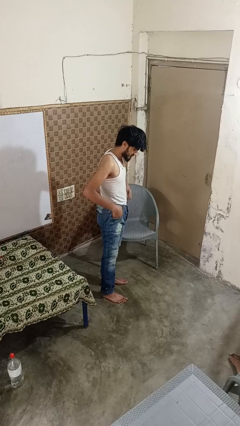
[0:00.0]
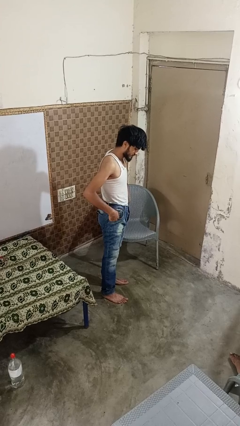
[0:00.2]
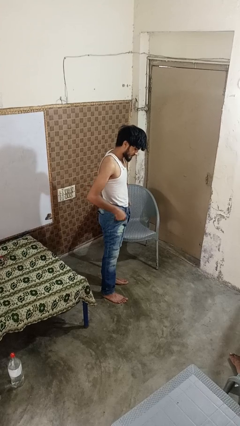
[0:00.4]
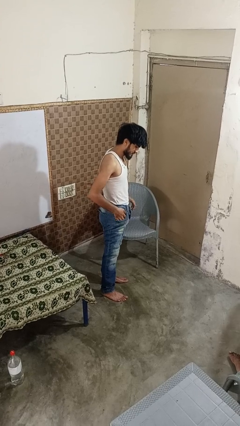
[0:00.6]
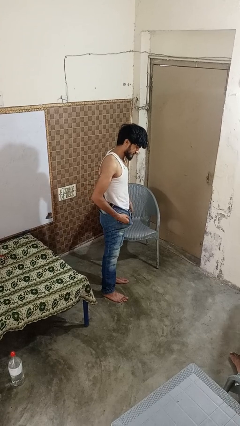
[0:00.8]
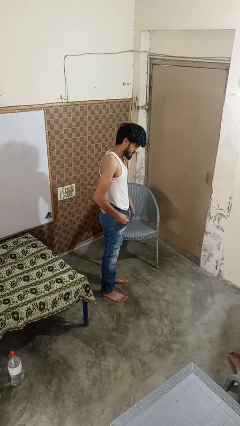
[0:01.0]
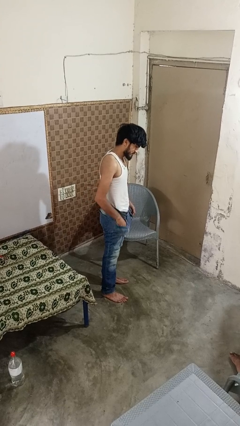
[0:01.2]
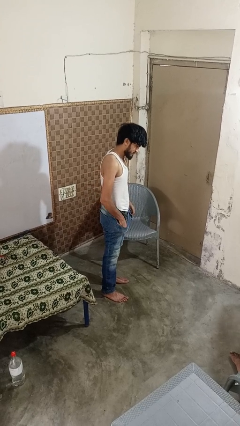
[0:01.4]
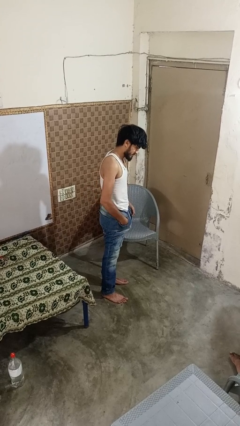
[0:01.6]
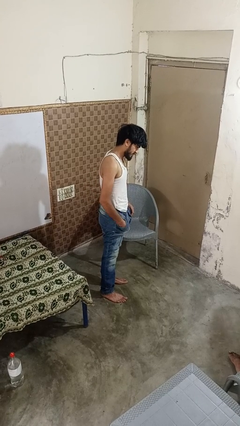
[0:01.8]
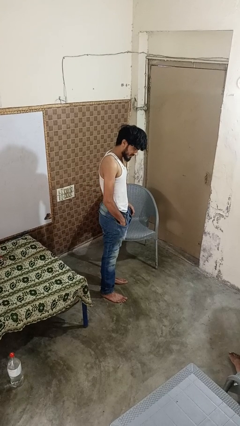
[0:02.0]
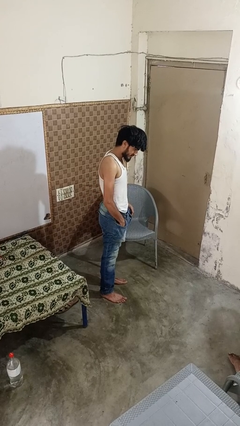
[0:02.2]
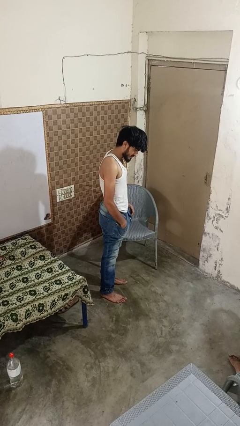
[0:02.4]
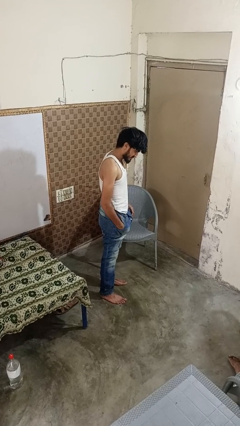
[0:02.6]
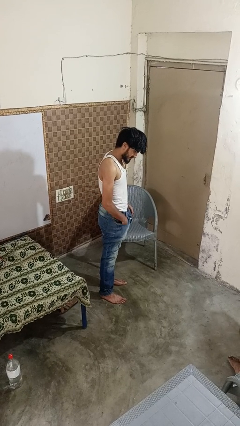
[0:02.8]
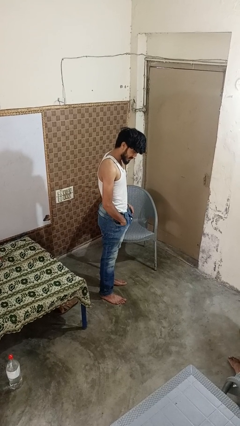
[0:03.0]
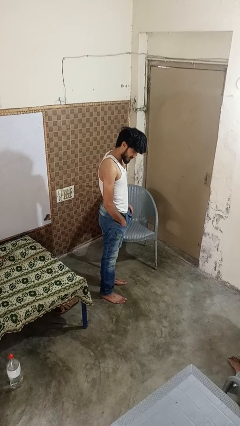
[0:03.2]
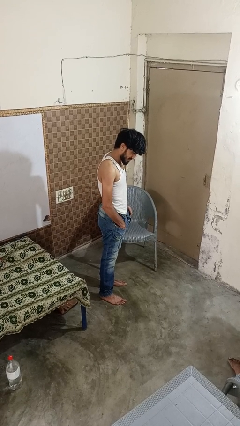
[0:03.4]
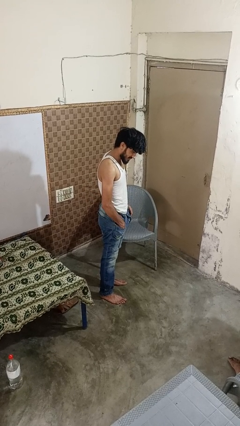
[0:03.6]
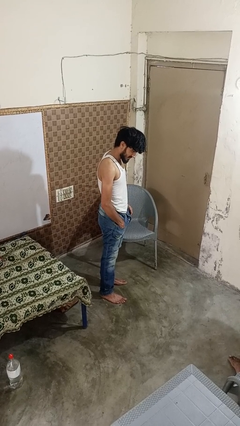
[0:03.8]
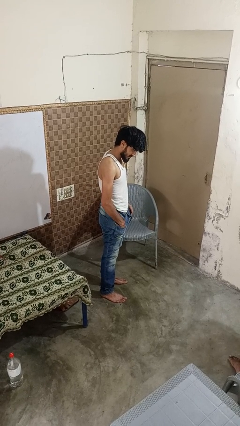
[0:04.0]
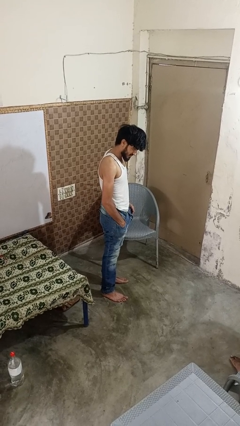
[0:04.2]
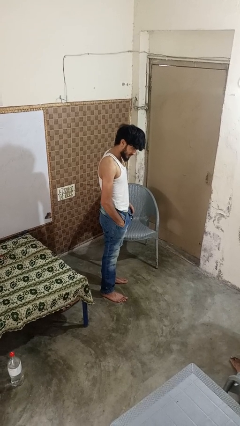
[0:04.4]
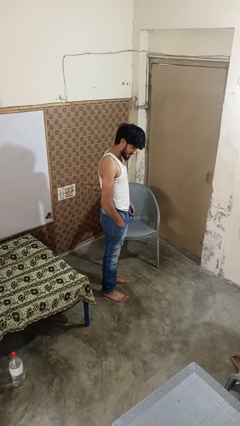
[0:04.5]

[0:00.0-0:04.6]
person puts hands in back pockets

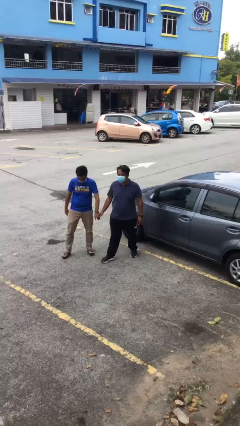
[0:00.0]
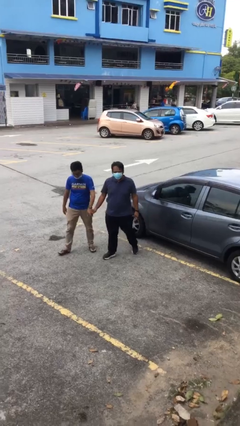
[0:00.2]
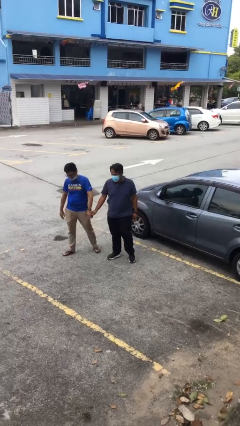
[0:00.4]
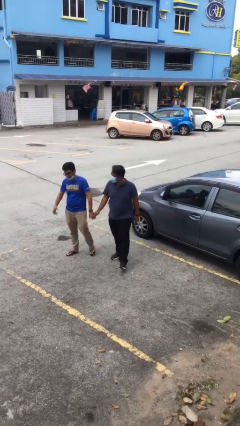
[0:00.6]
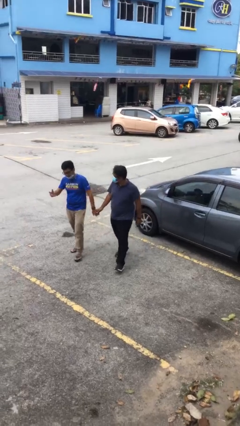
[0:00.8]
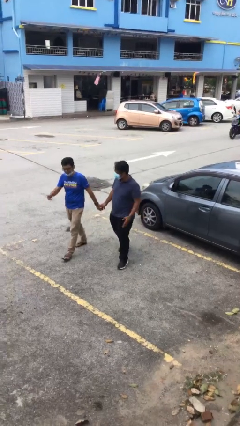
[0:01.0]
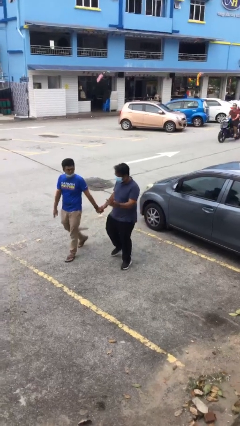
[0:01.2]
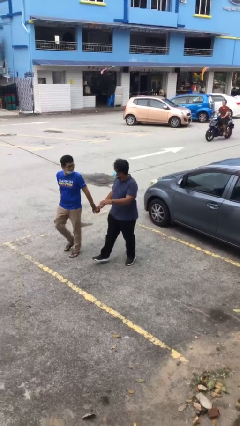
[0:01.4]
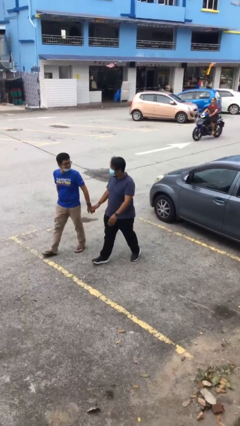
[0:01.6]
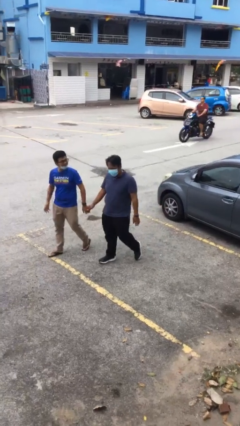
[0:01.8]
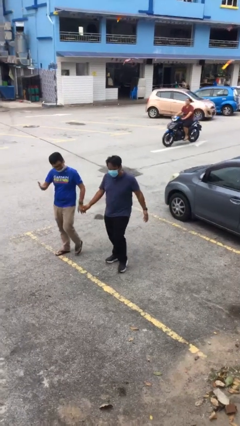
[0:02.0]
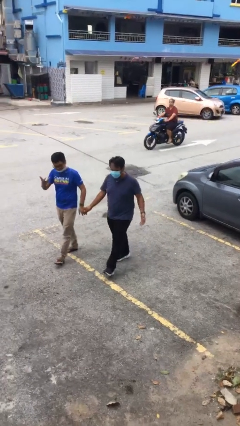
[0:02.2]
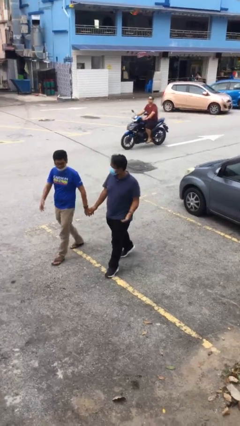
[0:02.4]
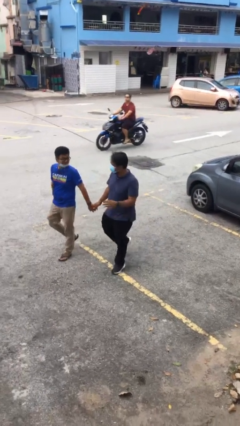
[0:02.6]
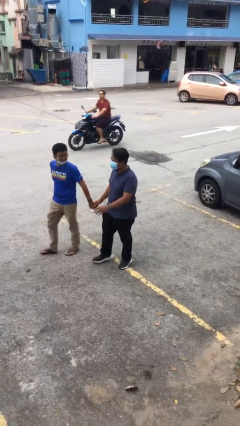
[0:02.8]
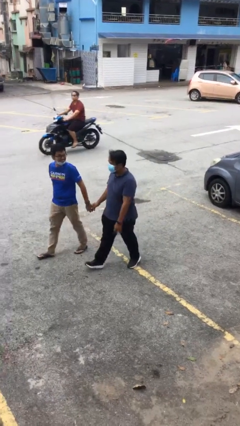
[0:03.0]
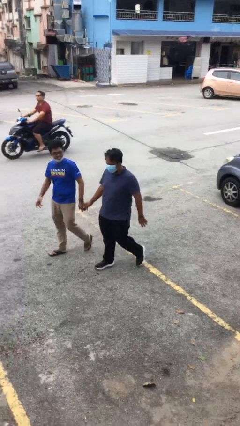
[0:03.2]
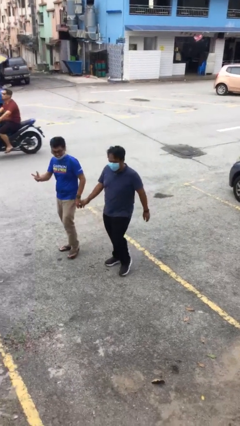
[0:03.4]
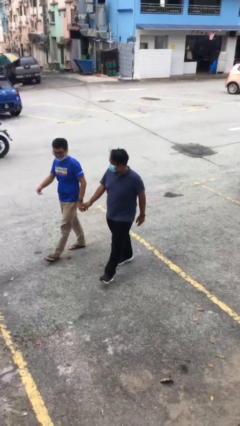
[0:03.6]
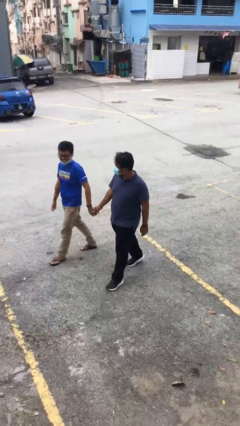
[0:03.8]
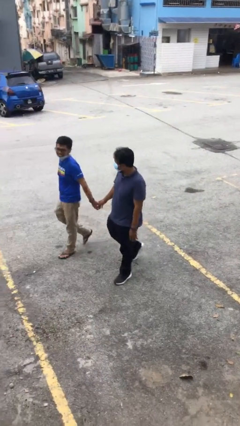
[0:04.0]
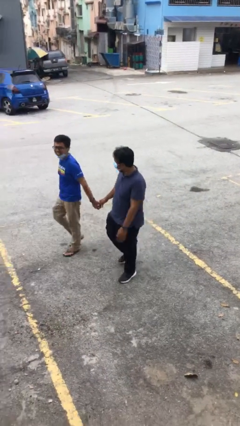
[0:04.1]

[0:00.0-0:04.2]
person holds hand

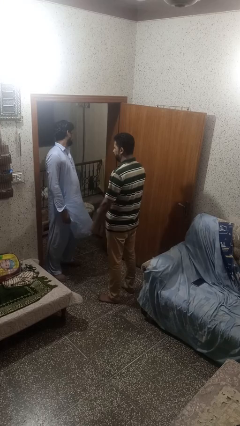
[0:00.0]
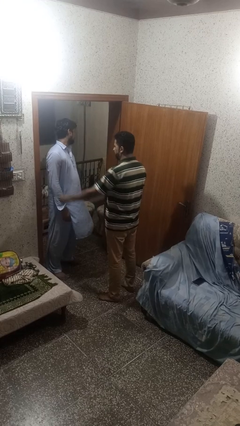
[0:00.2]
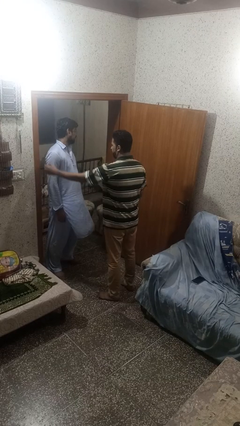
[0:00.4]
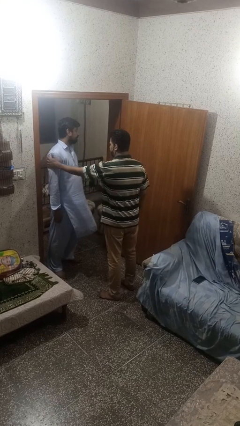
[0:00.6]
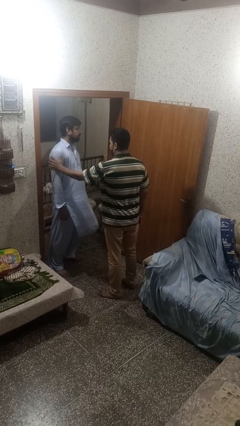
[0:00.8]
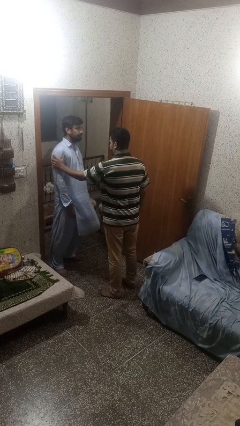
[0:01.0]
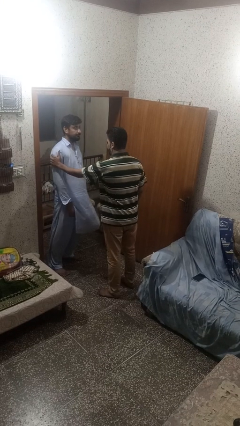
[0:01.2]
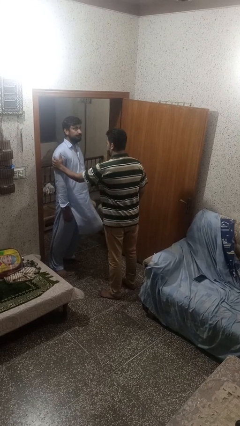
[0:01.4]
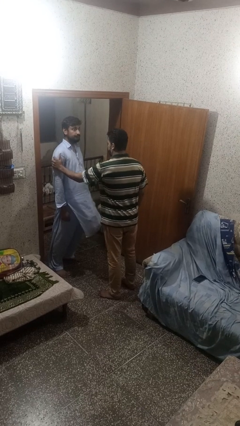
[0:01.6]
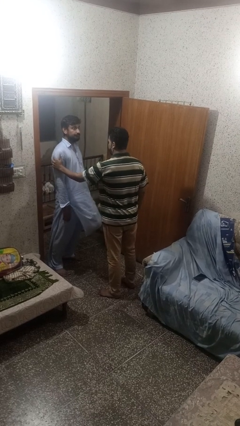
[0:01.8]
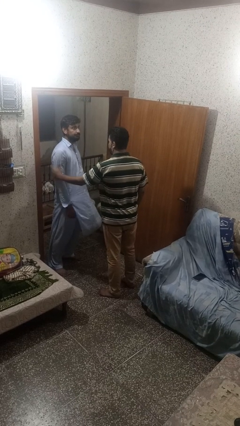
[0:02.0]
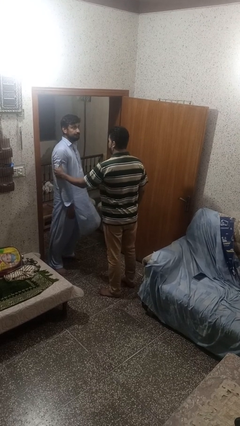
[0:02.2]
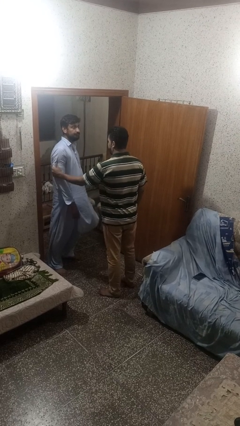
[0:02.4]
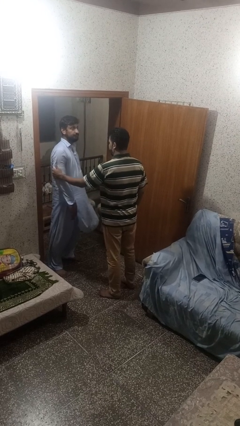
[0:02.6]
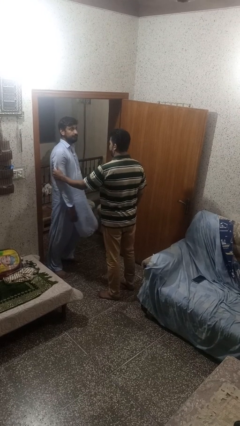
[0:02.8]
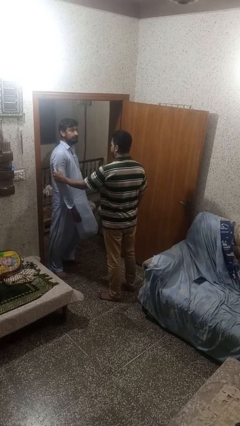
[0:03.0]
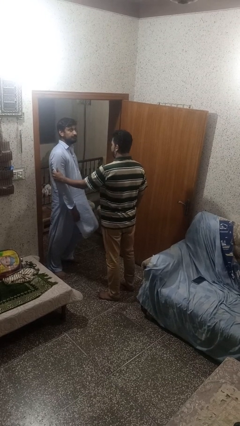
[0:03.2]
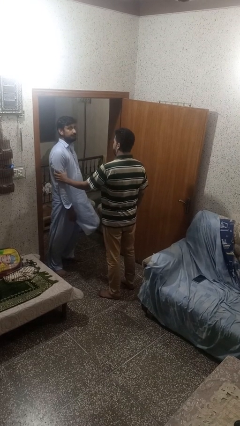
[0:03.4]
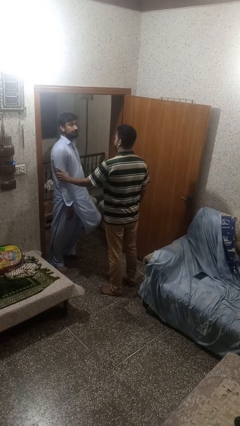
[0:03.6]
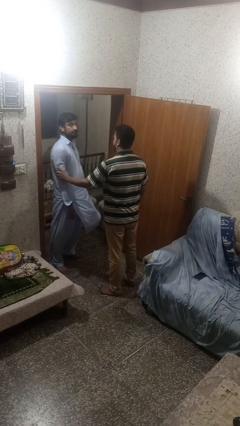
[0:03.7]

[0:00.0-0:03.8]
person grabs person by bicep

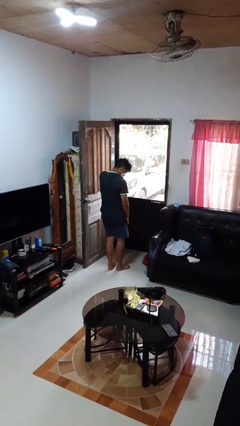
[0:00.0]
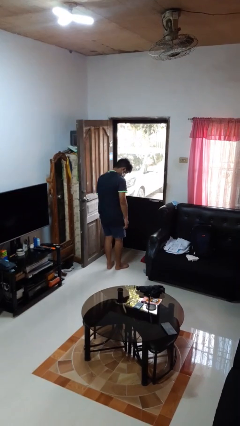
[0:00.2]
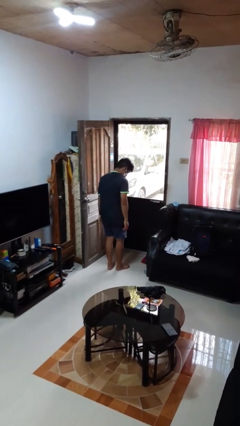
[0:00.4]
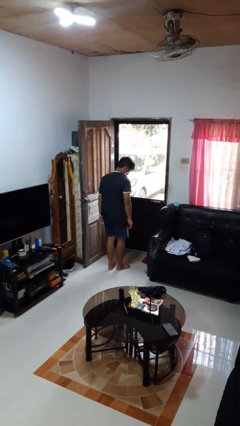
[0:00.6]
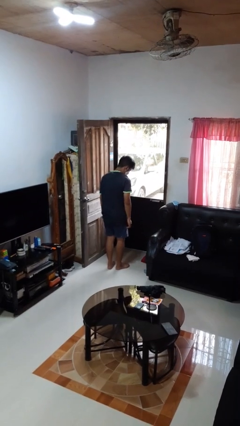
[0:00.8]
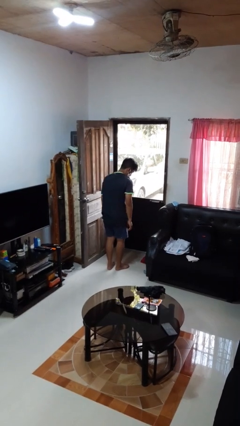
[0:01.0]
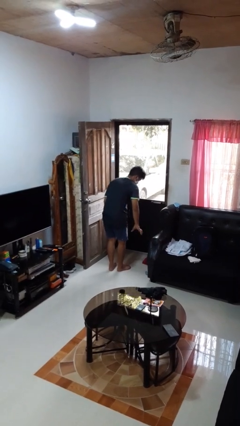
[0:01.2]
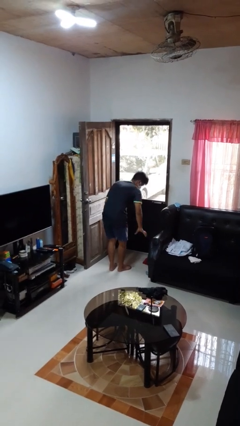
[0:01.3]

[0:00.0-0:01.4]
person drops object

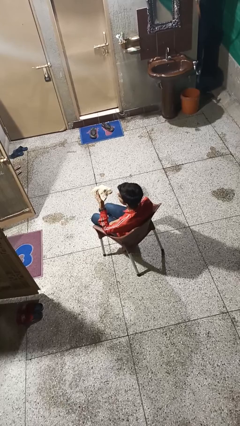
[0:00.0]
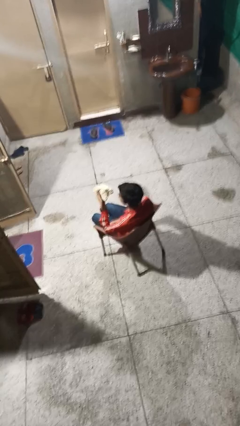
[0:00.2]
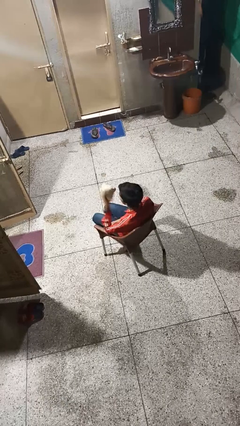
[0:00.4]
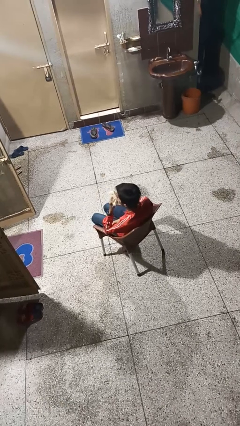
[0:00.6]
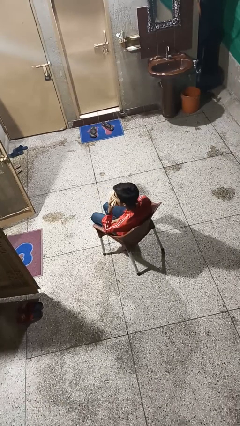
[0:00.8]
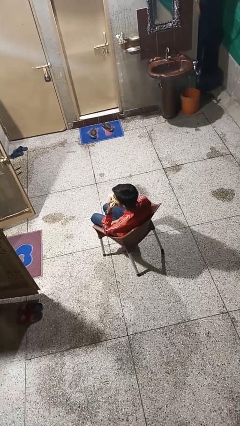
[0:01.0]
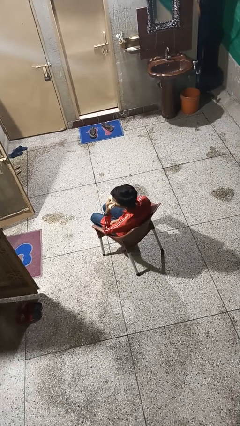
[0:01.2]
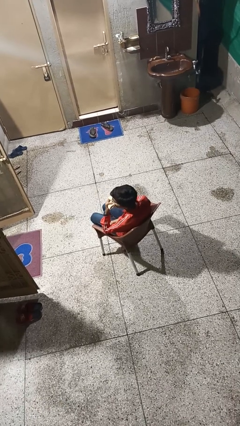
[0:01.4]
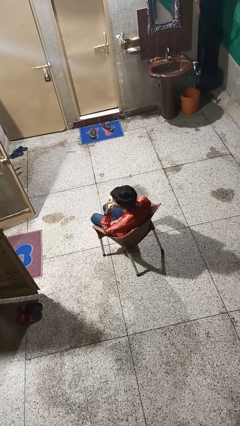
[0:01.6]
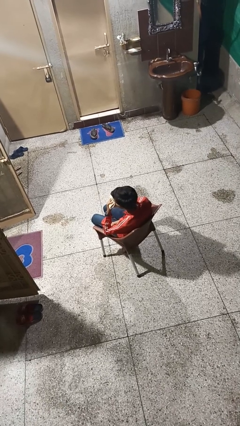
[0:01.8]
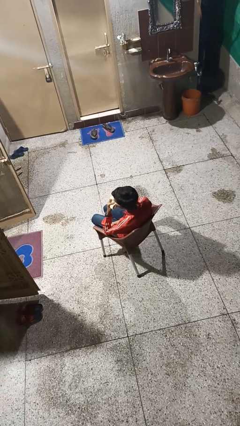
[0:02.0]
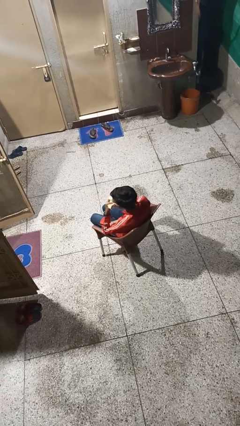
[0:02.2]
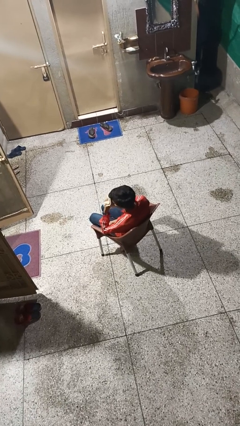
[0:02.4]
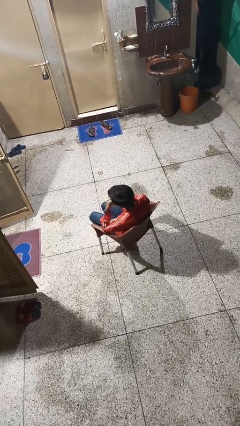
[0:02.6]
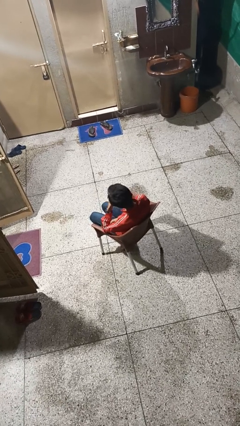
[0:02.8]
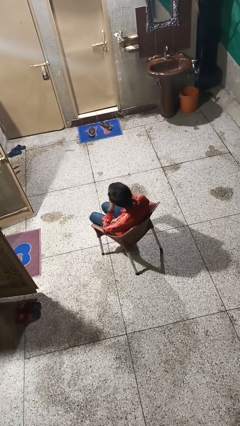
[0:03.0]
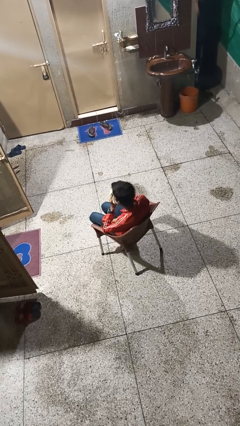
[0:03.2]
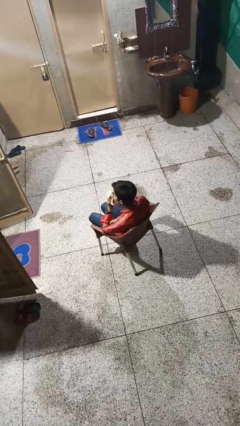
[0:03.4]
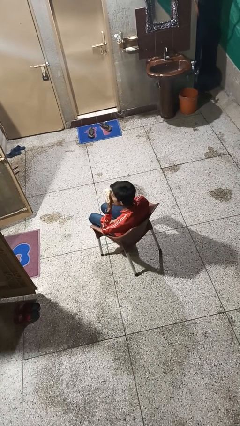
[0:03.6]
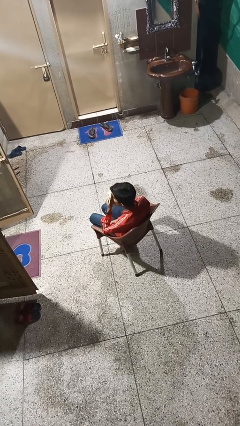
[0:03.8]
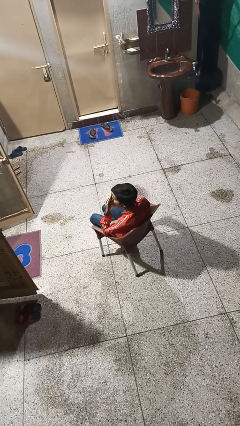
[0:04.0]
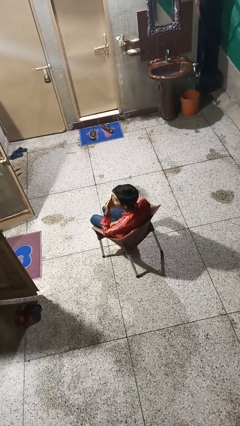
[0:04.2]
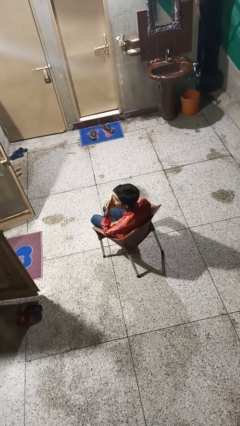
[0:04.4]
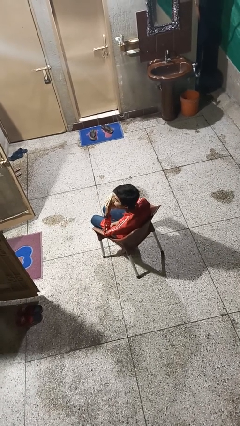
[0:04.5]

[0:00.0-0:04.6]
person blows nose
